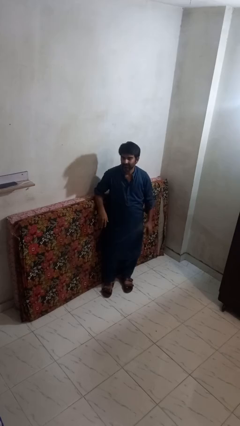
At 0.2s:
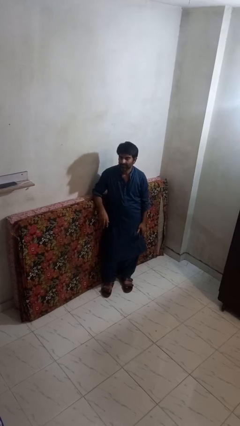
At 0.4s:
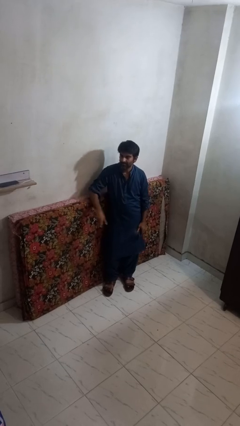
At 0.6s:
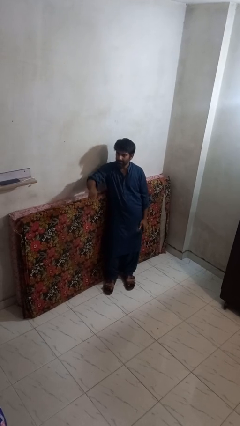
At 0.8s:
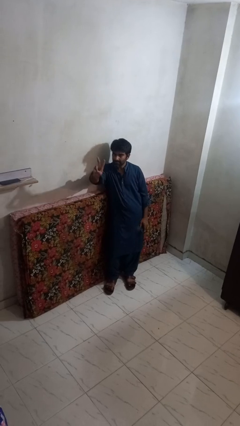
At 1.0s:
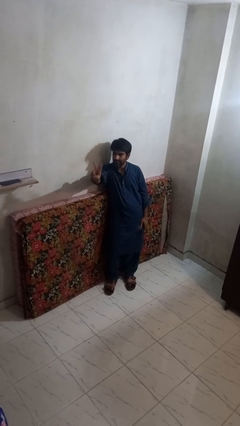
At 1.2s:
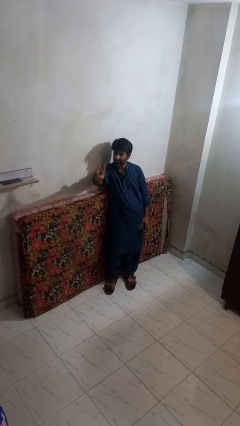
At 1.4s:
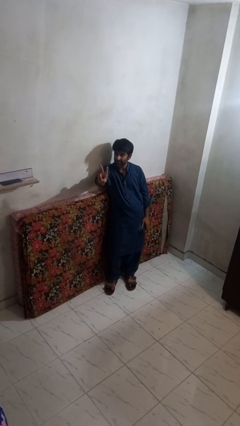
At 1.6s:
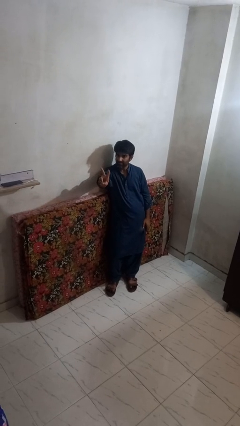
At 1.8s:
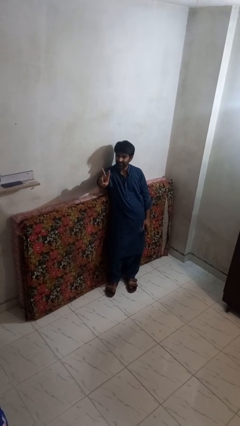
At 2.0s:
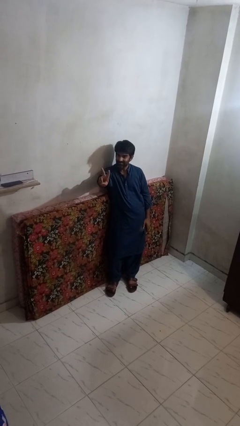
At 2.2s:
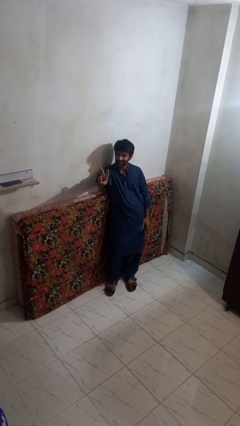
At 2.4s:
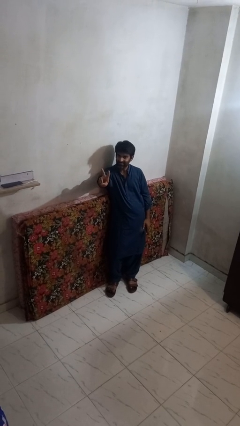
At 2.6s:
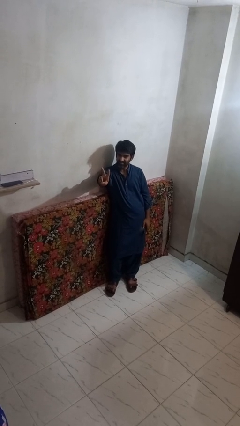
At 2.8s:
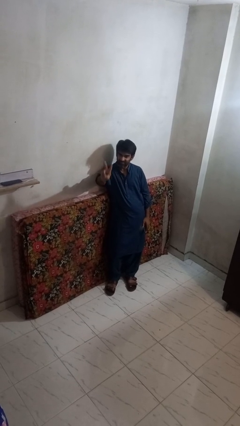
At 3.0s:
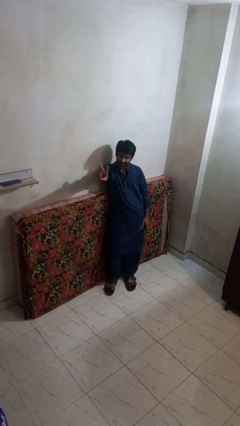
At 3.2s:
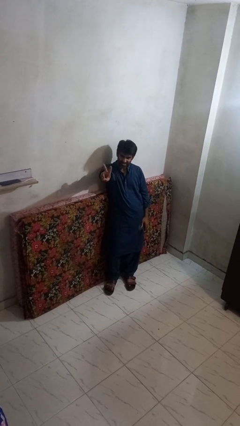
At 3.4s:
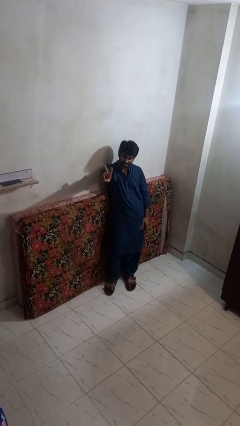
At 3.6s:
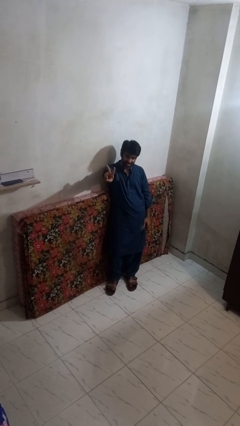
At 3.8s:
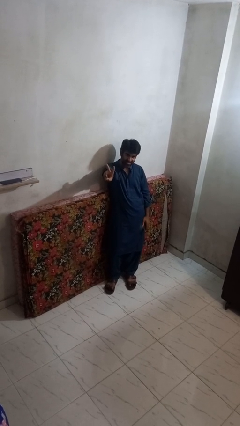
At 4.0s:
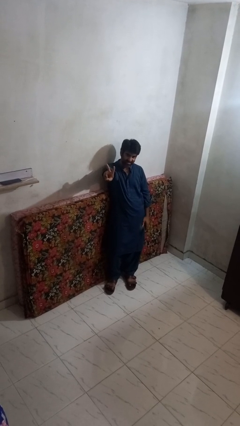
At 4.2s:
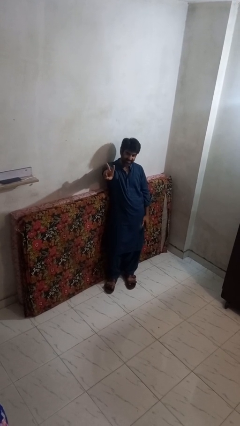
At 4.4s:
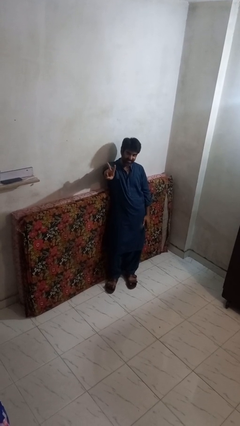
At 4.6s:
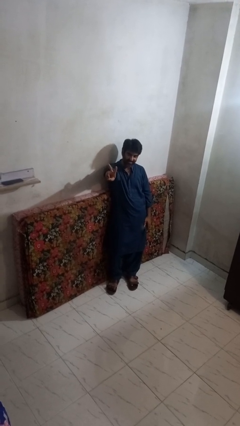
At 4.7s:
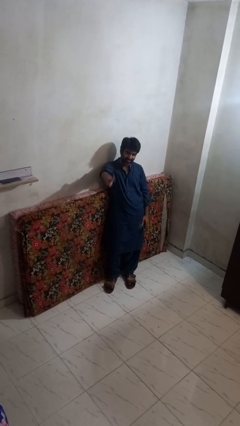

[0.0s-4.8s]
person gestures peace

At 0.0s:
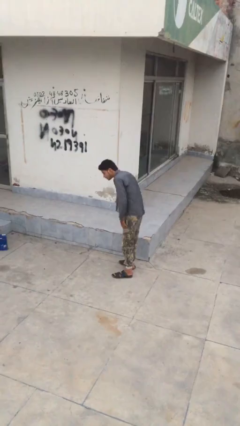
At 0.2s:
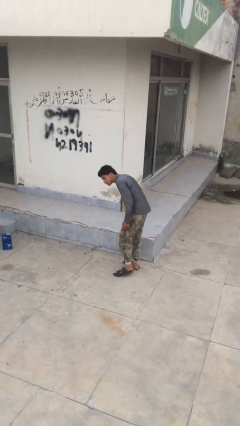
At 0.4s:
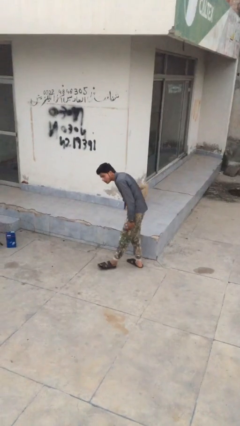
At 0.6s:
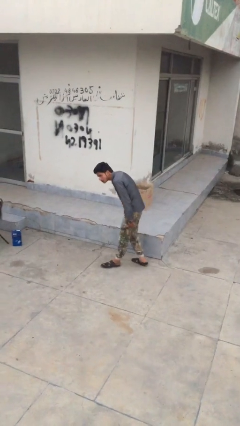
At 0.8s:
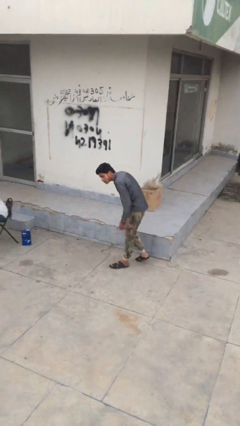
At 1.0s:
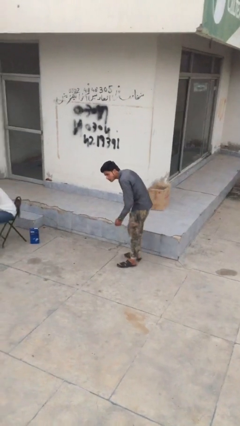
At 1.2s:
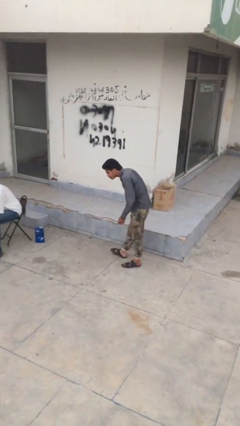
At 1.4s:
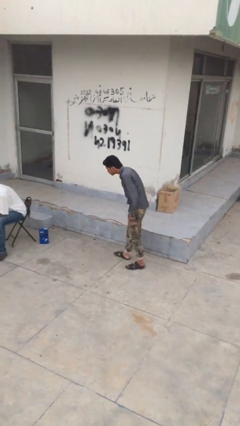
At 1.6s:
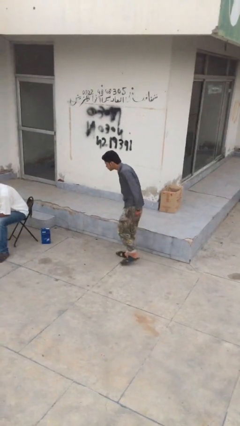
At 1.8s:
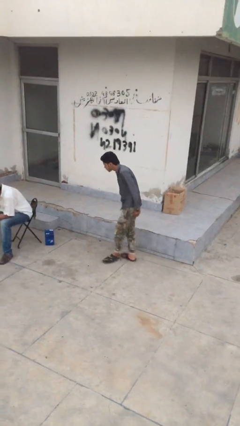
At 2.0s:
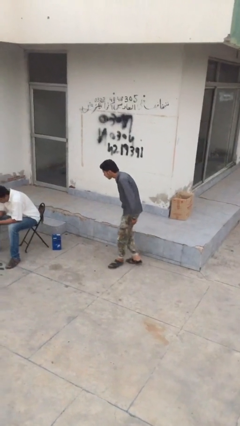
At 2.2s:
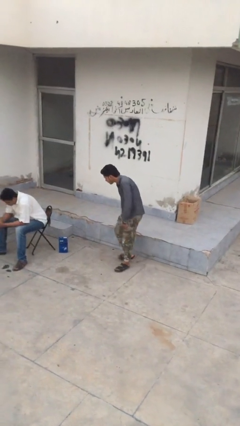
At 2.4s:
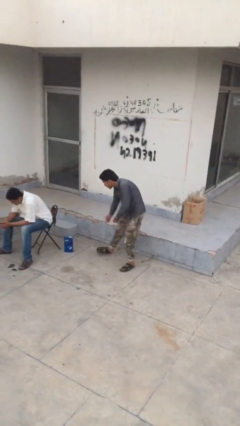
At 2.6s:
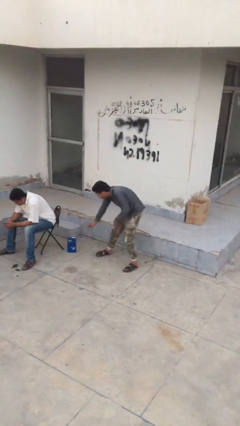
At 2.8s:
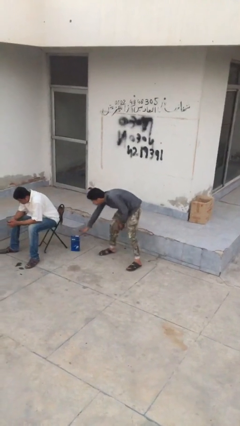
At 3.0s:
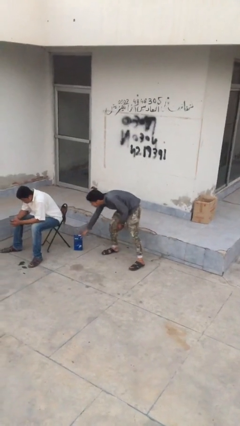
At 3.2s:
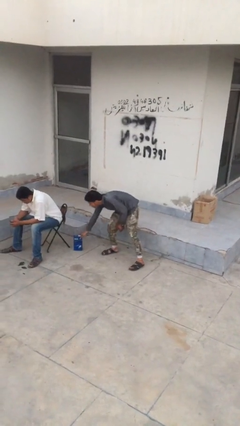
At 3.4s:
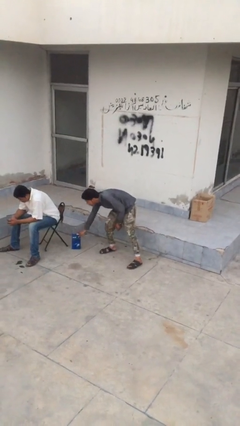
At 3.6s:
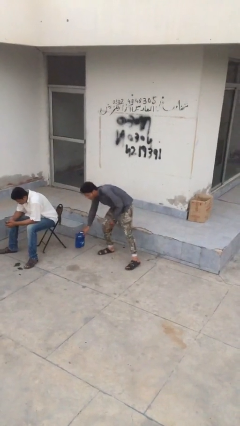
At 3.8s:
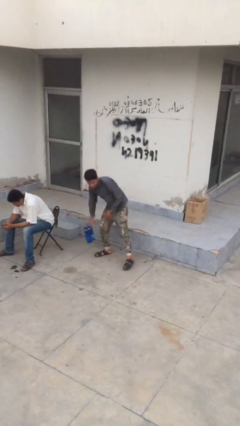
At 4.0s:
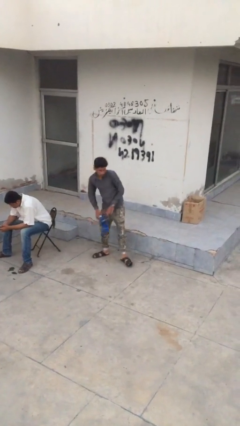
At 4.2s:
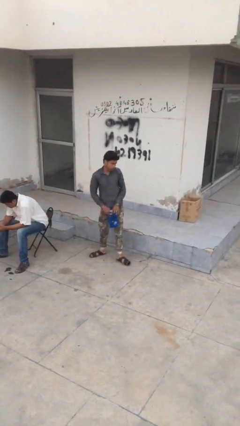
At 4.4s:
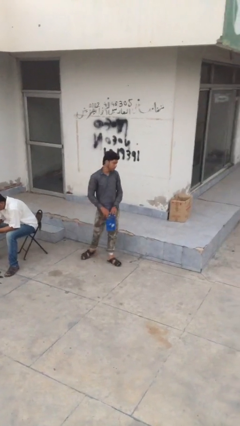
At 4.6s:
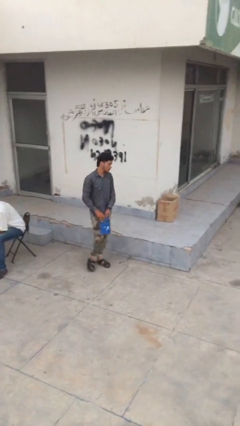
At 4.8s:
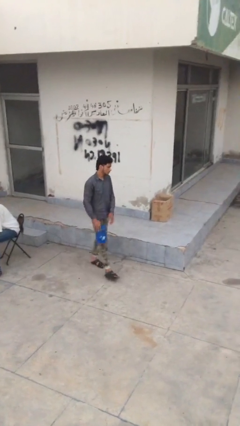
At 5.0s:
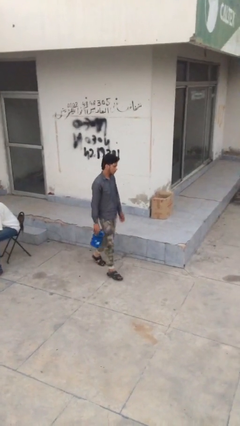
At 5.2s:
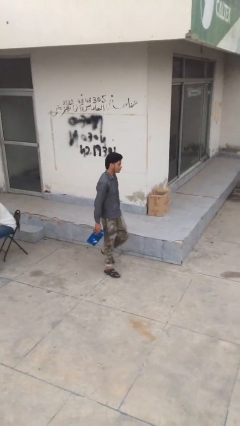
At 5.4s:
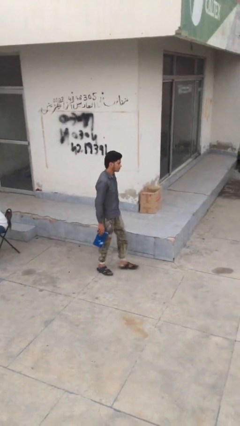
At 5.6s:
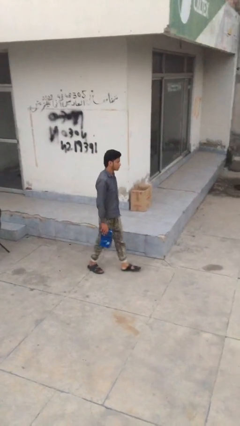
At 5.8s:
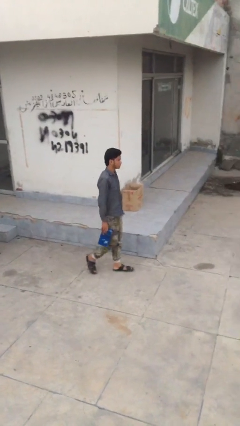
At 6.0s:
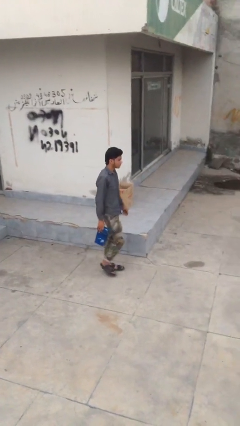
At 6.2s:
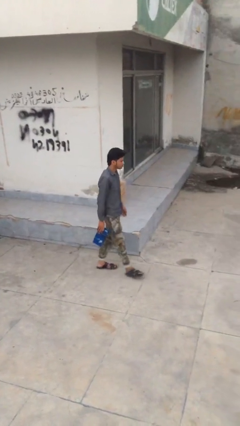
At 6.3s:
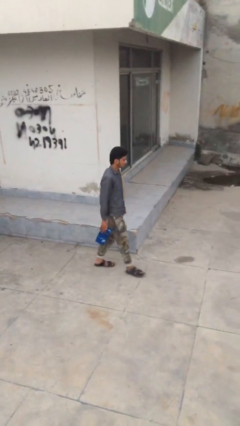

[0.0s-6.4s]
person steals object from person

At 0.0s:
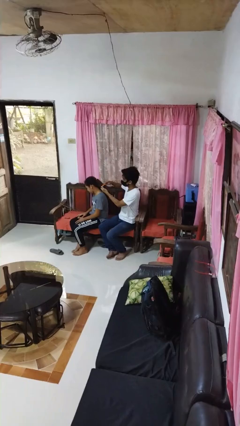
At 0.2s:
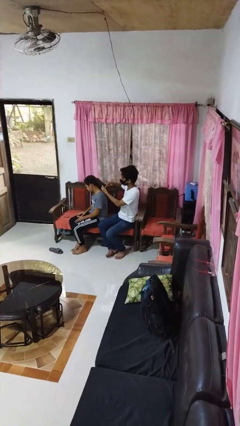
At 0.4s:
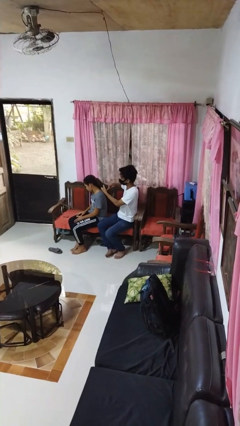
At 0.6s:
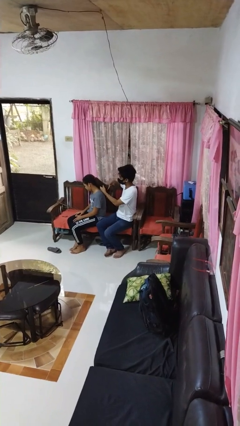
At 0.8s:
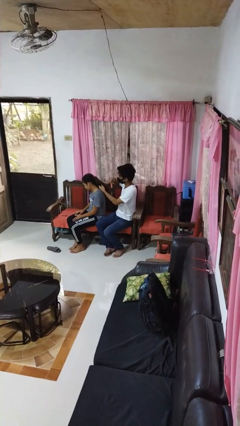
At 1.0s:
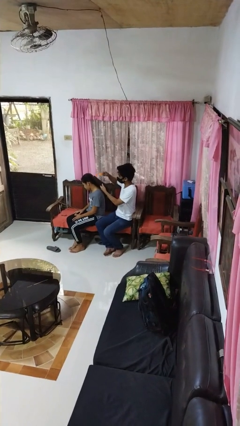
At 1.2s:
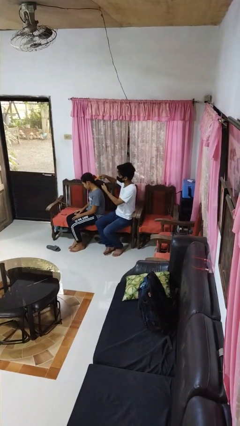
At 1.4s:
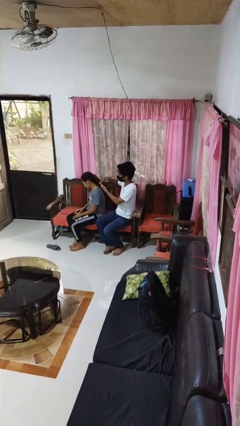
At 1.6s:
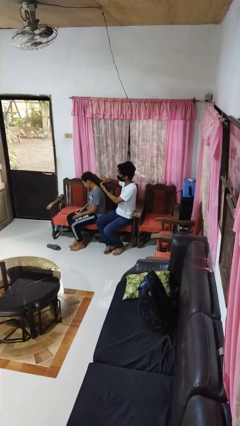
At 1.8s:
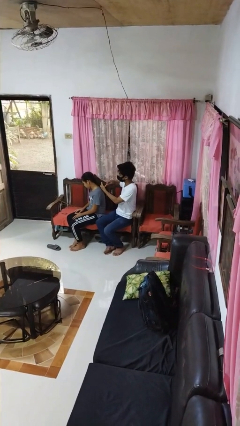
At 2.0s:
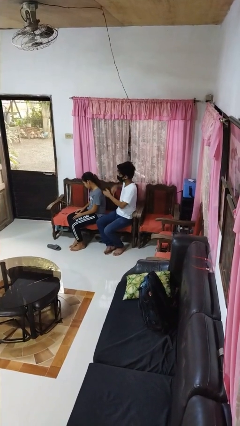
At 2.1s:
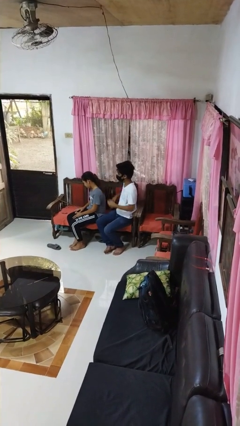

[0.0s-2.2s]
person brushes hair of person

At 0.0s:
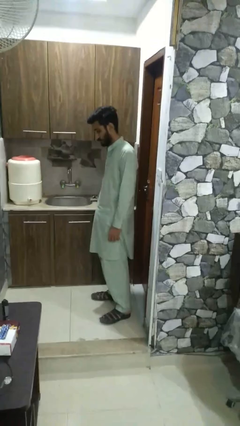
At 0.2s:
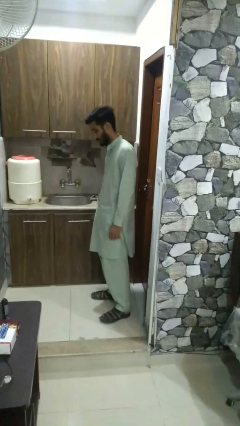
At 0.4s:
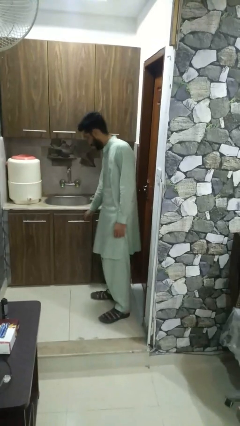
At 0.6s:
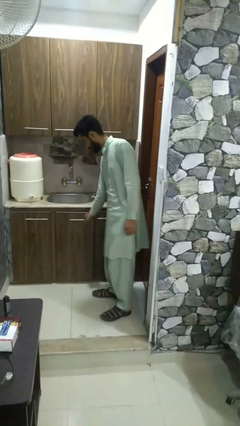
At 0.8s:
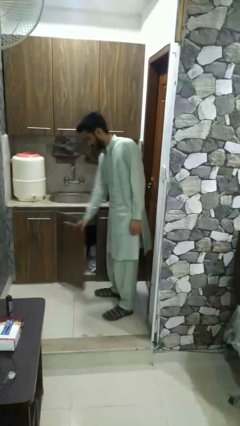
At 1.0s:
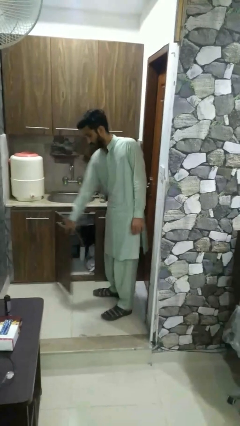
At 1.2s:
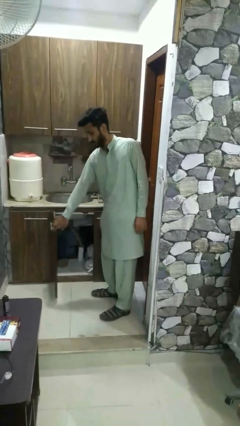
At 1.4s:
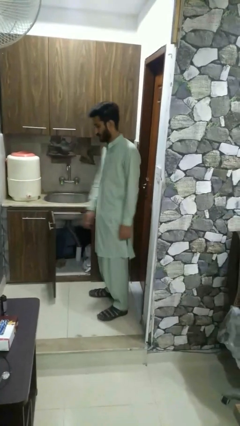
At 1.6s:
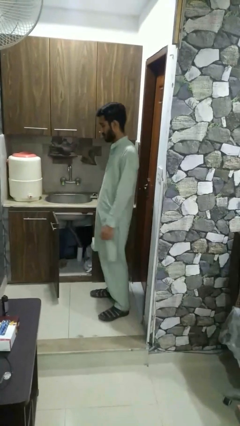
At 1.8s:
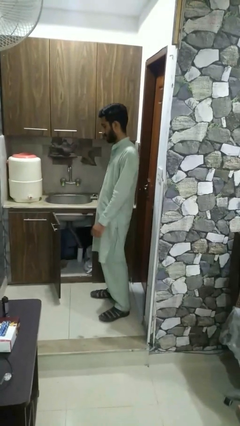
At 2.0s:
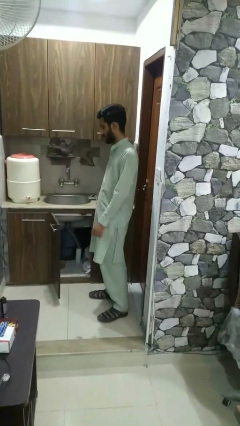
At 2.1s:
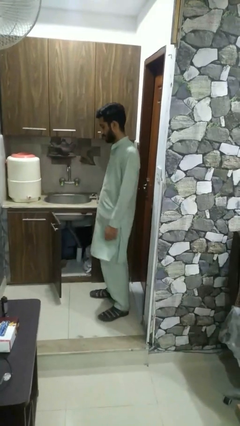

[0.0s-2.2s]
person opens closet door

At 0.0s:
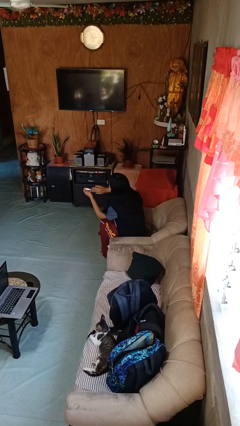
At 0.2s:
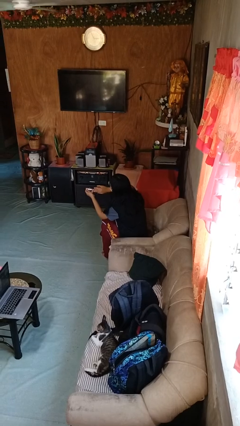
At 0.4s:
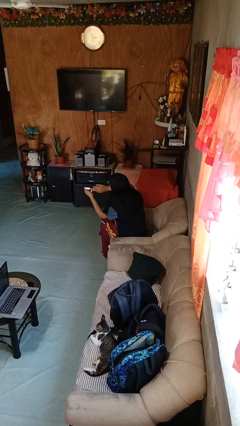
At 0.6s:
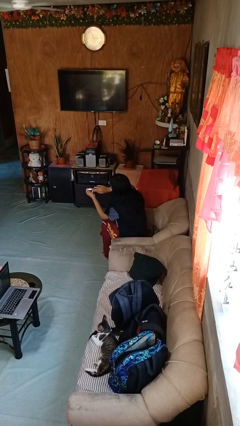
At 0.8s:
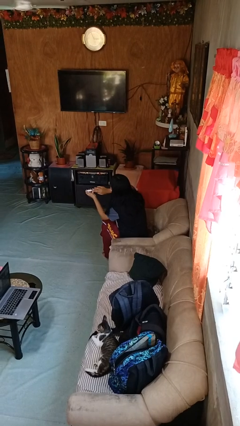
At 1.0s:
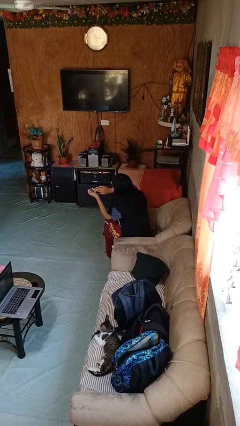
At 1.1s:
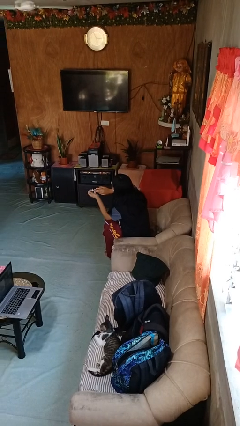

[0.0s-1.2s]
person clips fingernails

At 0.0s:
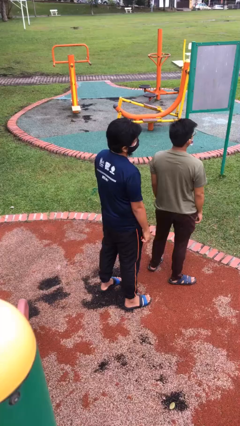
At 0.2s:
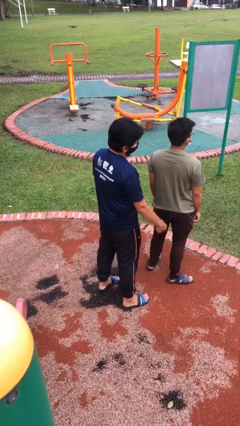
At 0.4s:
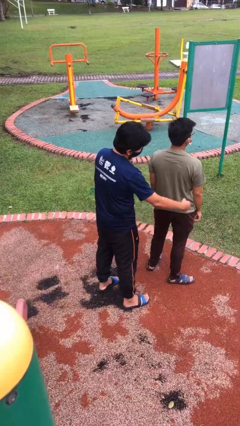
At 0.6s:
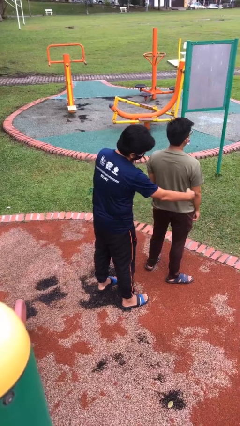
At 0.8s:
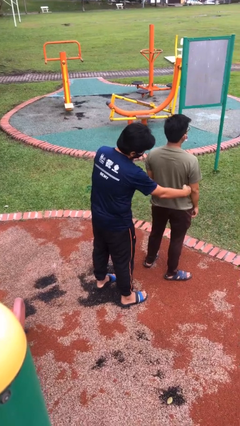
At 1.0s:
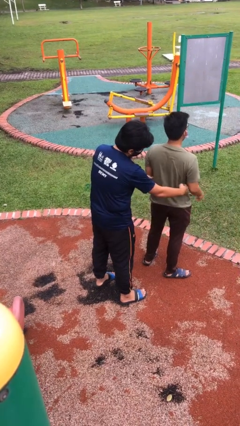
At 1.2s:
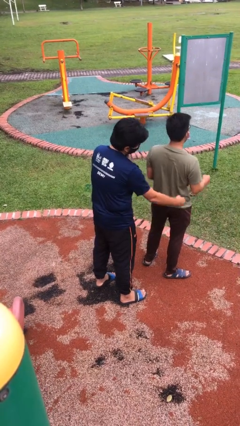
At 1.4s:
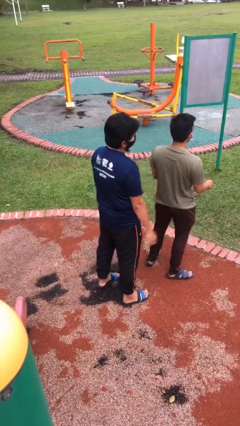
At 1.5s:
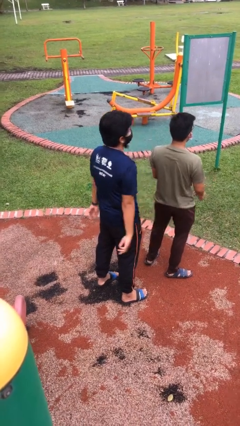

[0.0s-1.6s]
person tickles person
